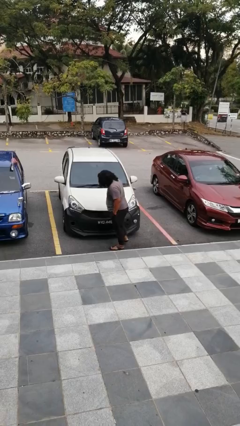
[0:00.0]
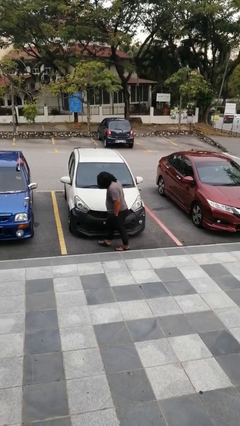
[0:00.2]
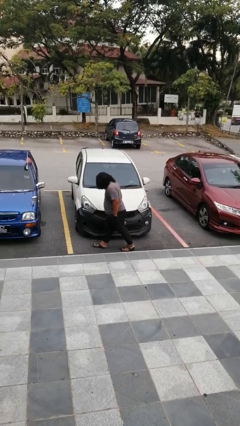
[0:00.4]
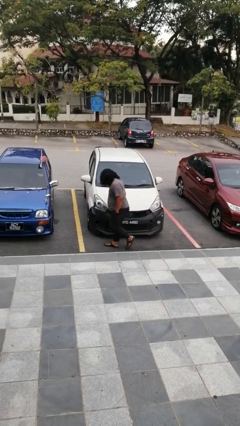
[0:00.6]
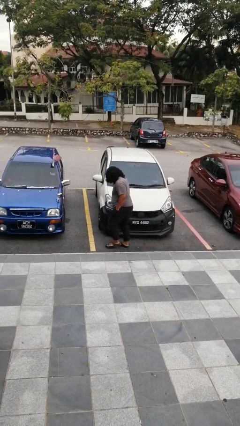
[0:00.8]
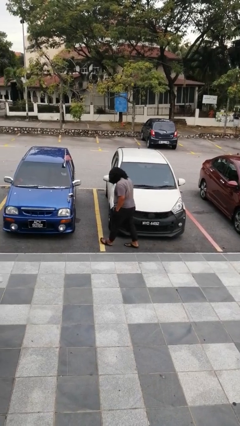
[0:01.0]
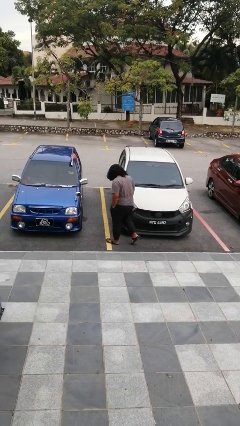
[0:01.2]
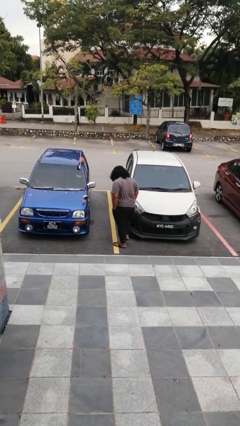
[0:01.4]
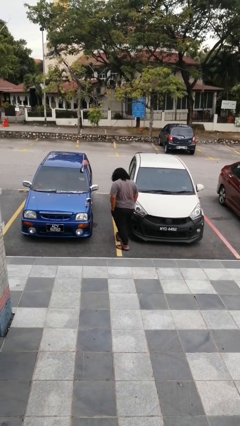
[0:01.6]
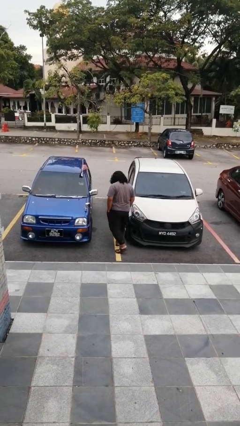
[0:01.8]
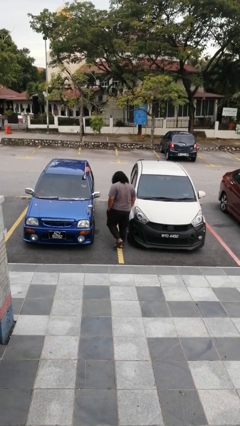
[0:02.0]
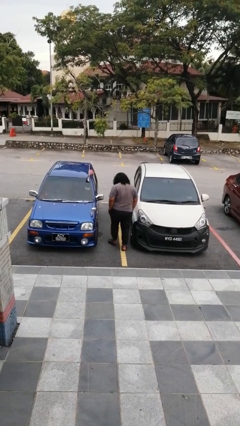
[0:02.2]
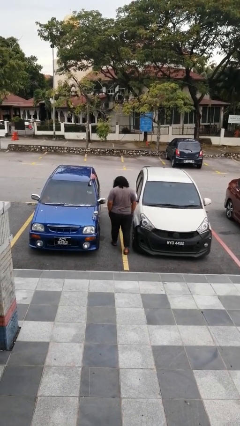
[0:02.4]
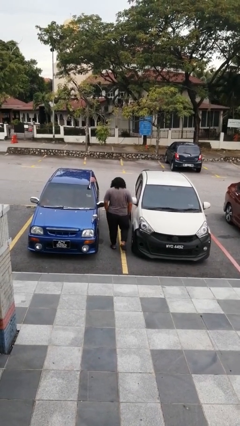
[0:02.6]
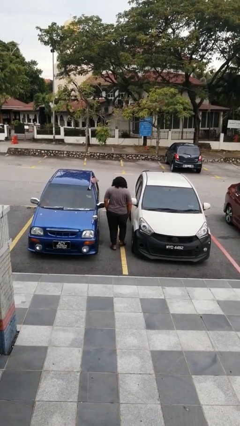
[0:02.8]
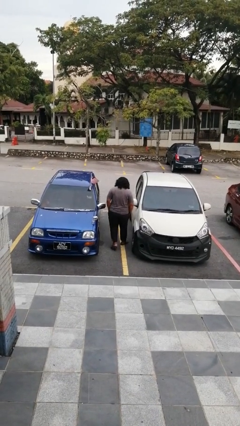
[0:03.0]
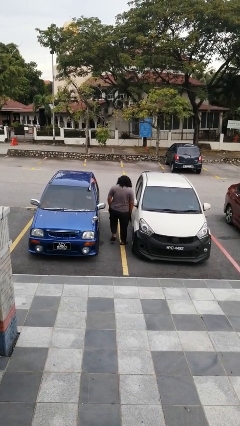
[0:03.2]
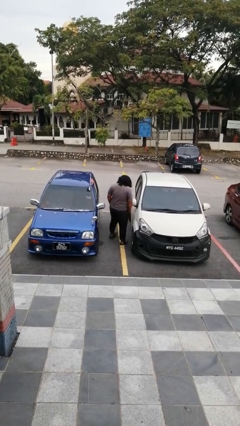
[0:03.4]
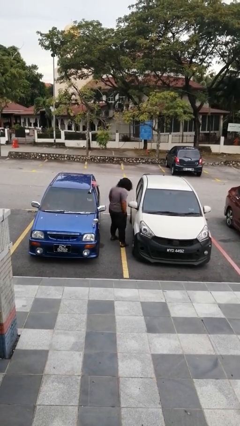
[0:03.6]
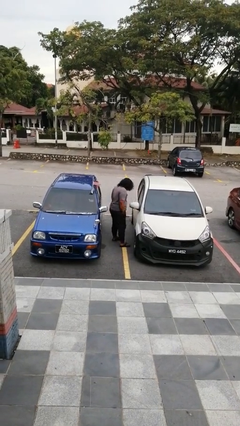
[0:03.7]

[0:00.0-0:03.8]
person walks around car

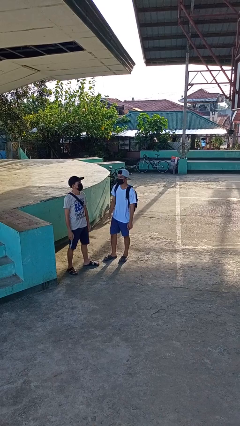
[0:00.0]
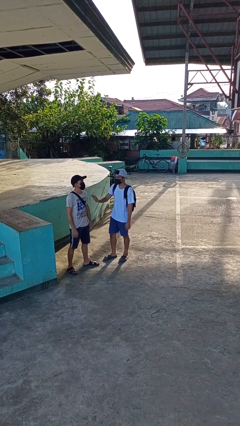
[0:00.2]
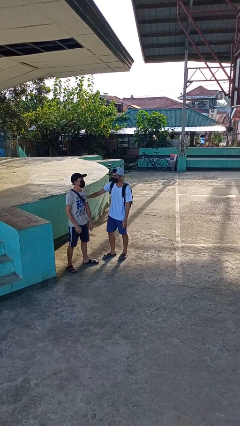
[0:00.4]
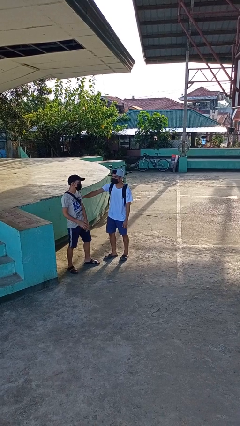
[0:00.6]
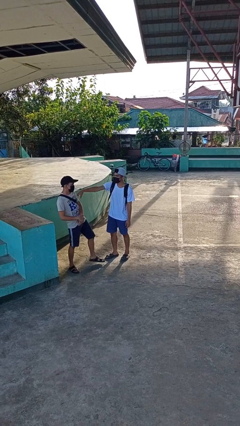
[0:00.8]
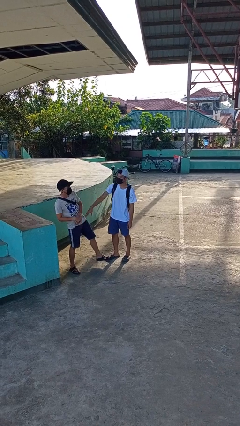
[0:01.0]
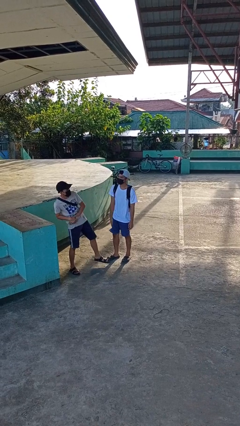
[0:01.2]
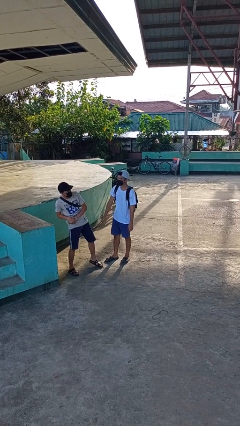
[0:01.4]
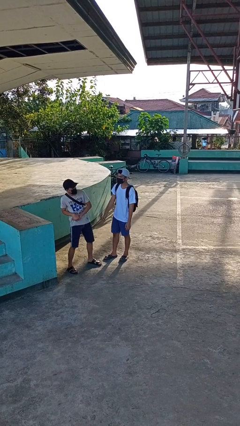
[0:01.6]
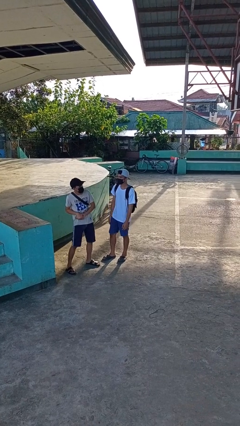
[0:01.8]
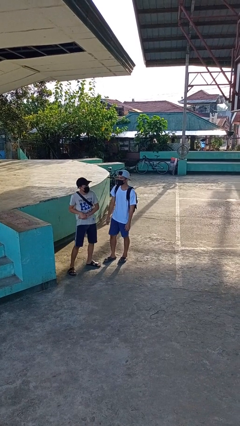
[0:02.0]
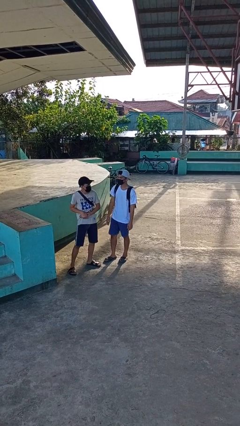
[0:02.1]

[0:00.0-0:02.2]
person shoves person

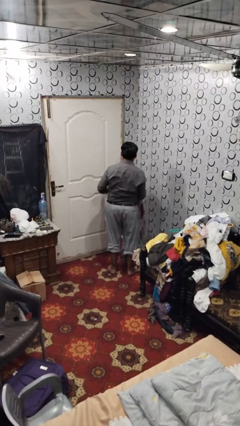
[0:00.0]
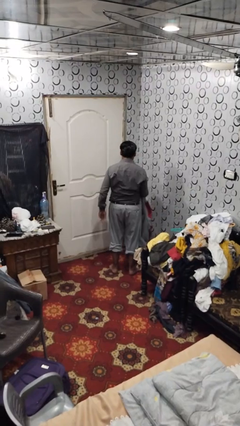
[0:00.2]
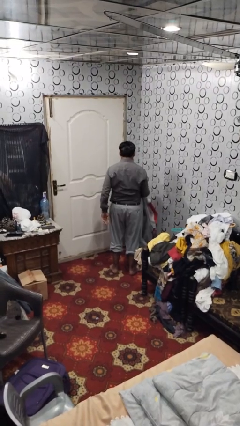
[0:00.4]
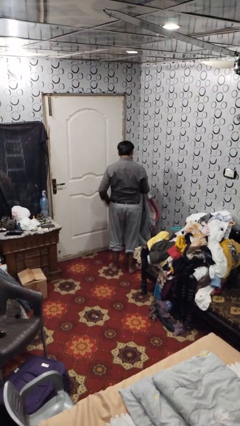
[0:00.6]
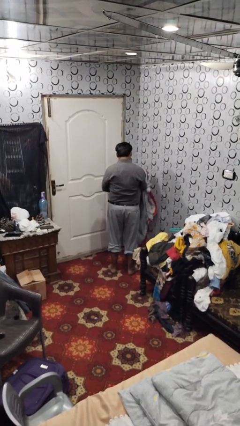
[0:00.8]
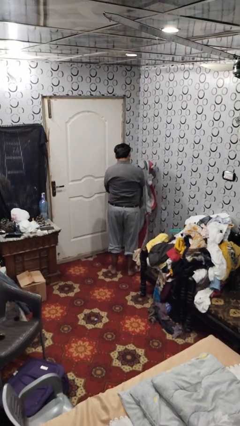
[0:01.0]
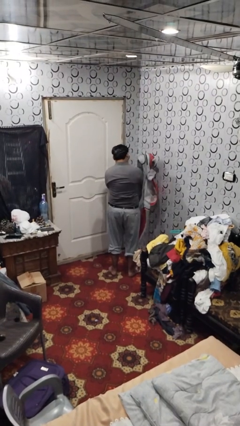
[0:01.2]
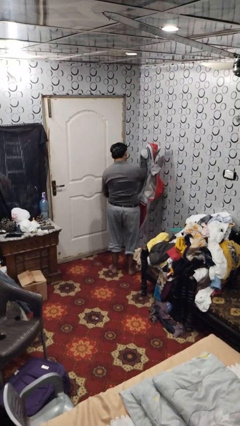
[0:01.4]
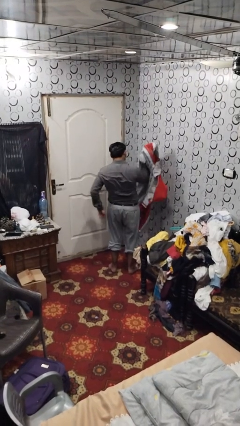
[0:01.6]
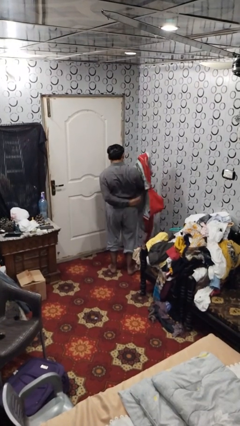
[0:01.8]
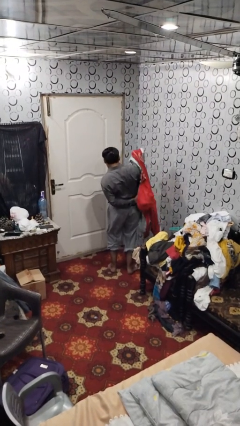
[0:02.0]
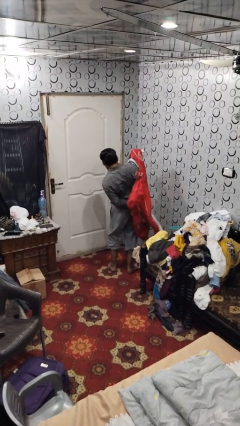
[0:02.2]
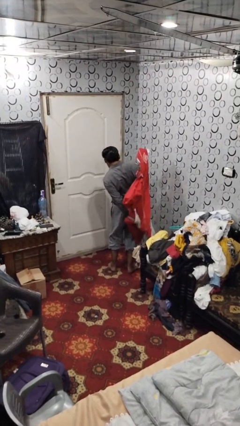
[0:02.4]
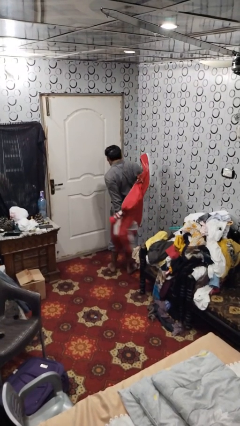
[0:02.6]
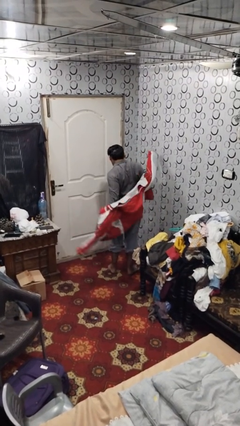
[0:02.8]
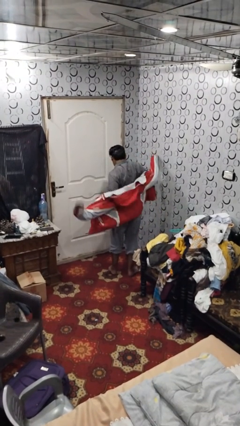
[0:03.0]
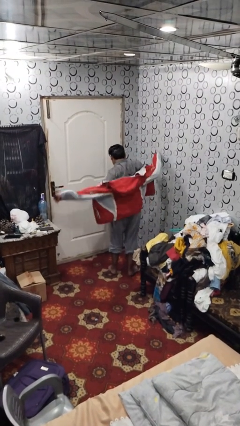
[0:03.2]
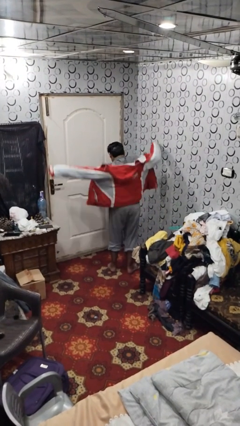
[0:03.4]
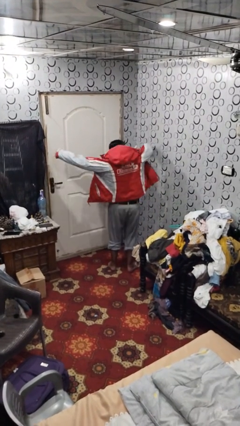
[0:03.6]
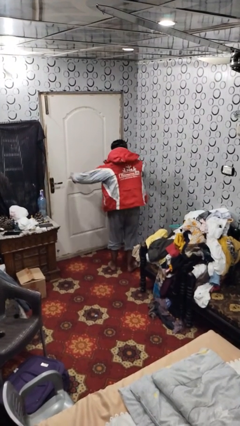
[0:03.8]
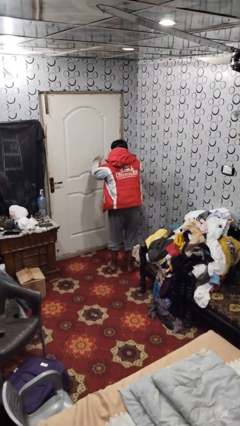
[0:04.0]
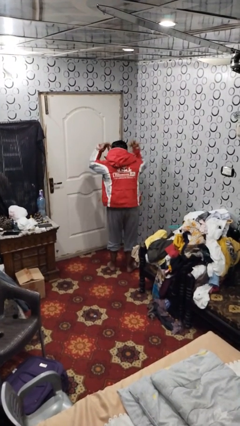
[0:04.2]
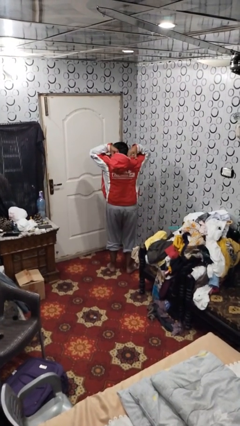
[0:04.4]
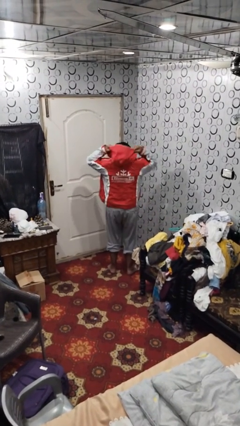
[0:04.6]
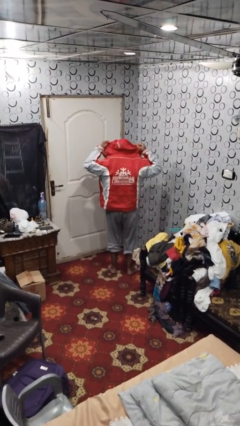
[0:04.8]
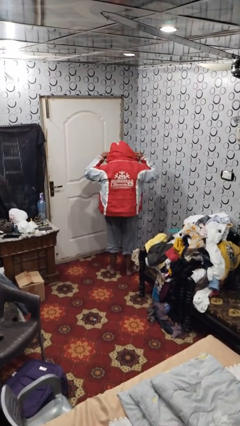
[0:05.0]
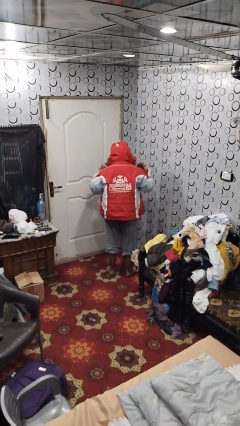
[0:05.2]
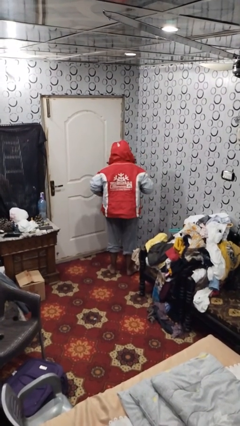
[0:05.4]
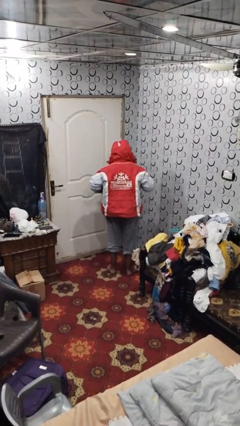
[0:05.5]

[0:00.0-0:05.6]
person puts on hoodie

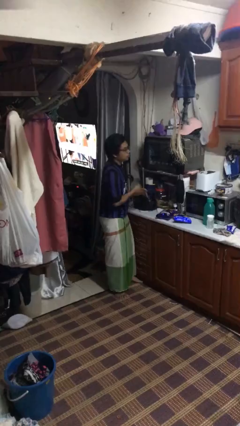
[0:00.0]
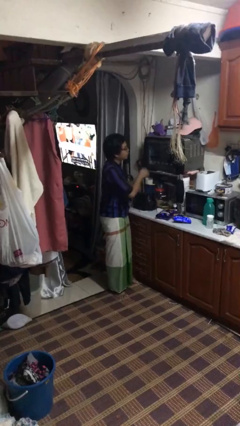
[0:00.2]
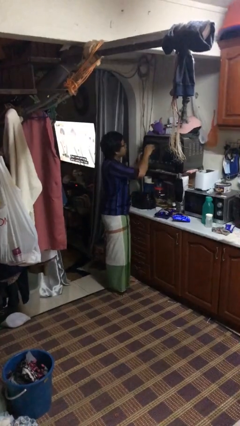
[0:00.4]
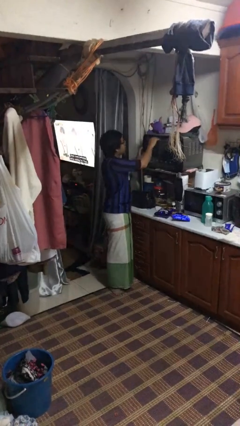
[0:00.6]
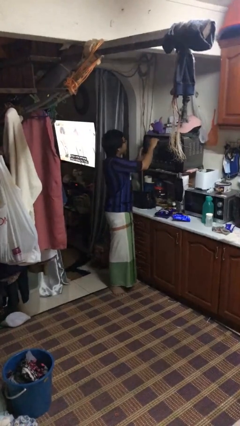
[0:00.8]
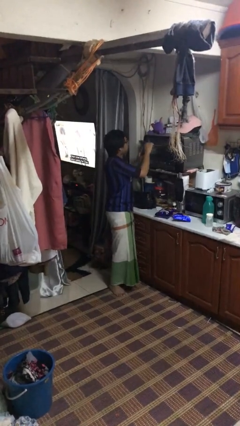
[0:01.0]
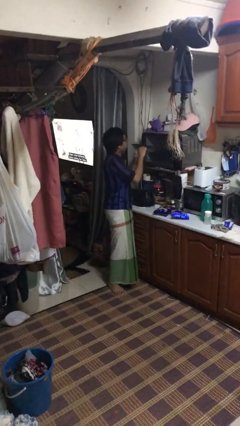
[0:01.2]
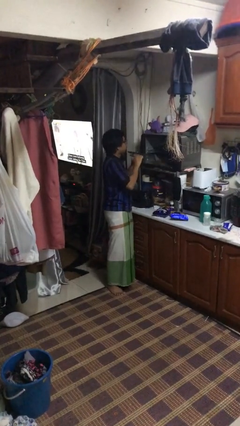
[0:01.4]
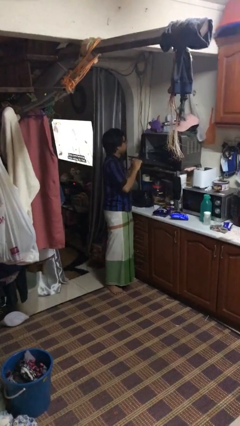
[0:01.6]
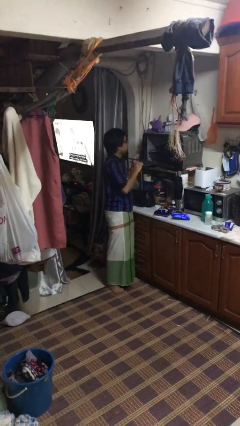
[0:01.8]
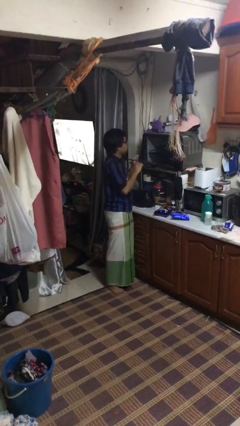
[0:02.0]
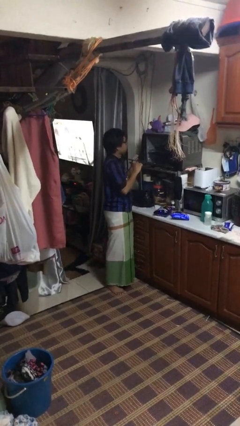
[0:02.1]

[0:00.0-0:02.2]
person opens oven door

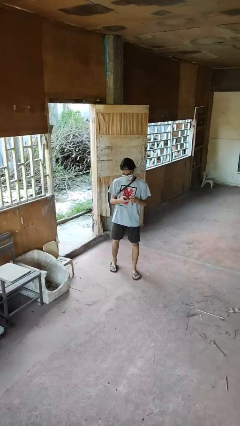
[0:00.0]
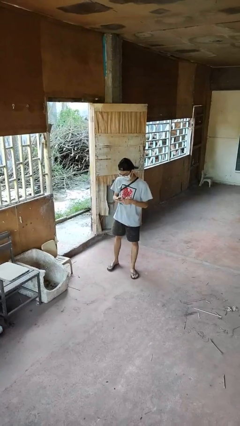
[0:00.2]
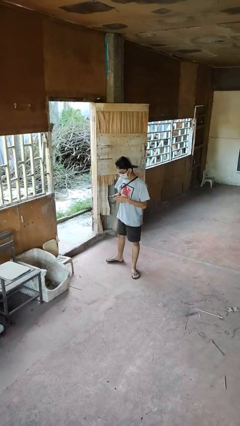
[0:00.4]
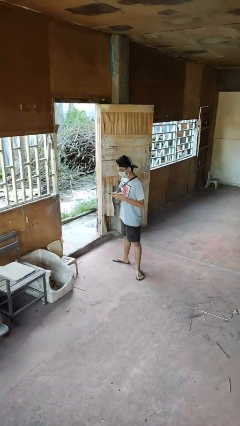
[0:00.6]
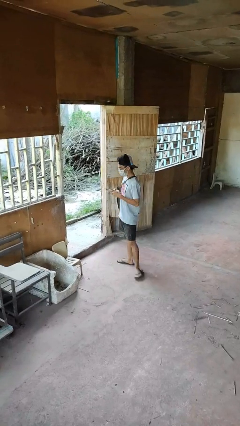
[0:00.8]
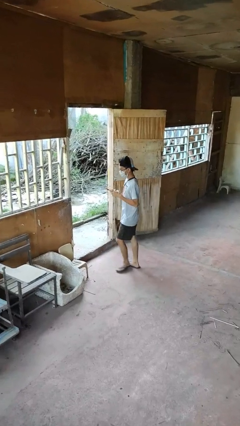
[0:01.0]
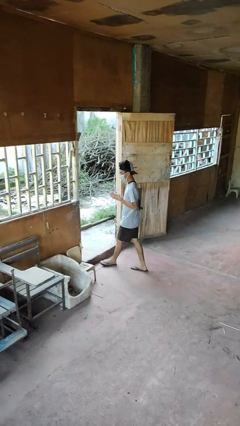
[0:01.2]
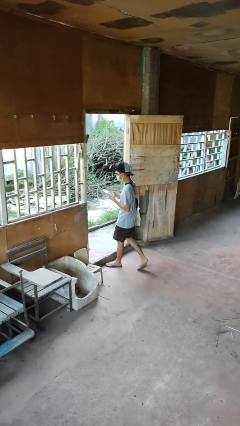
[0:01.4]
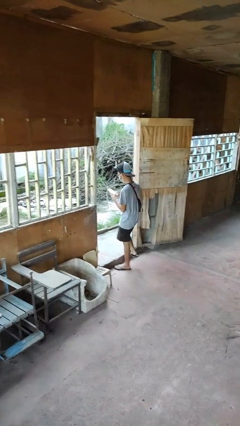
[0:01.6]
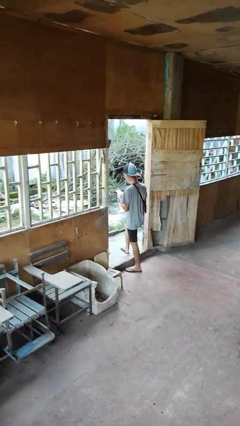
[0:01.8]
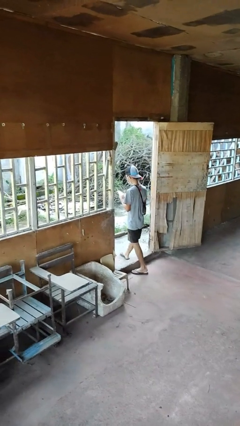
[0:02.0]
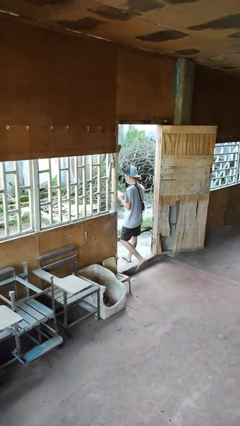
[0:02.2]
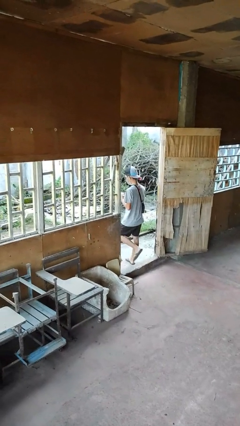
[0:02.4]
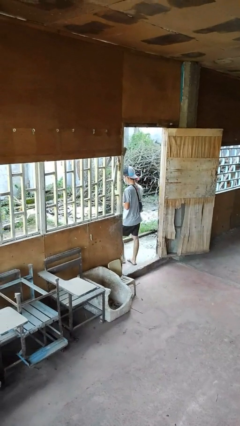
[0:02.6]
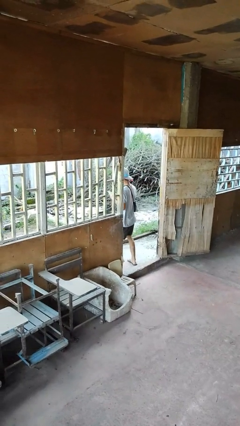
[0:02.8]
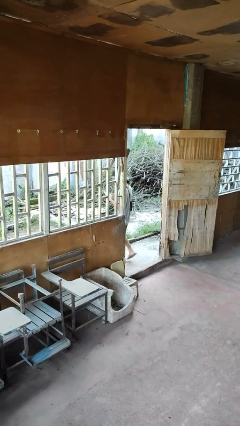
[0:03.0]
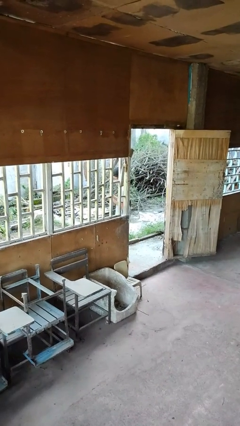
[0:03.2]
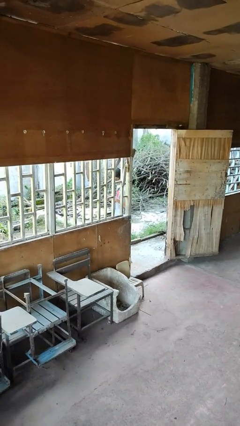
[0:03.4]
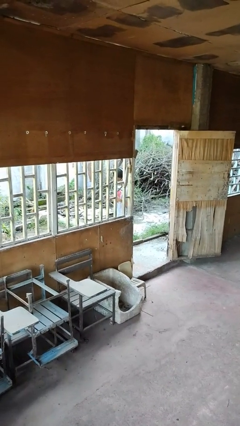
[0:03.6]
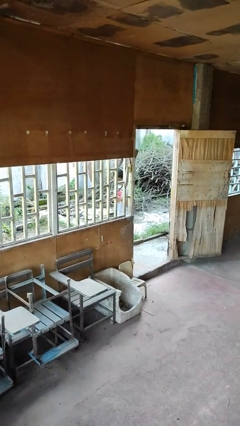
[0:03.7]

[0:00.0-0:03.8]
person exits scene through structure

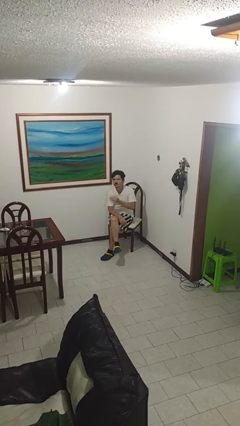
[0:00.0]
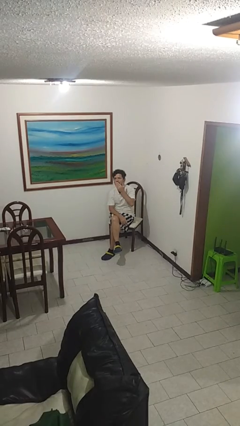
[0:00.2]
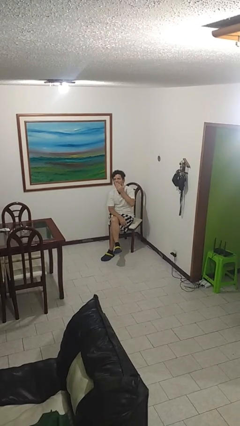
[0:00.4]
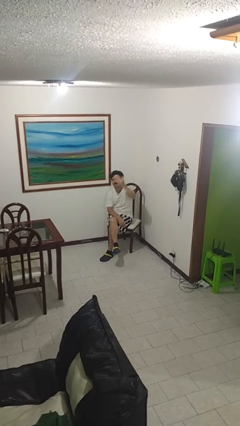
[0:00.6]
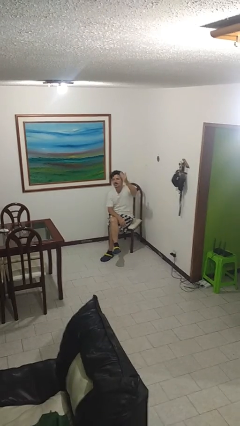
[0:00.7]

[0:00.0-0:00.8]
person gestures blow kiss
